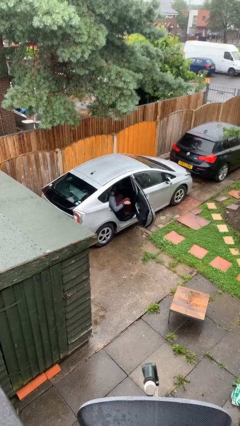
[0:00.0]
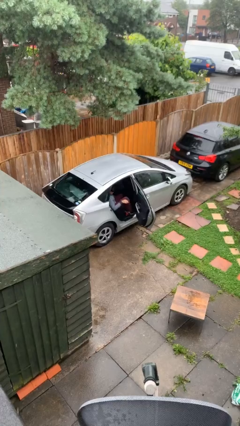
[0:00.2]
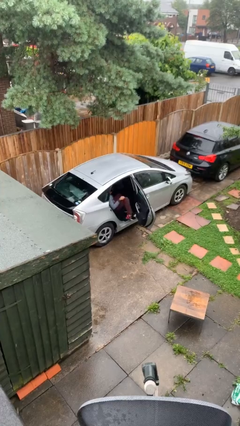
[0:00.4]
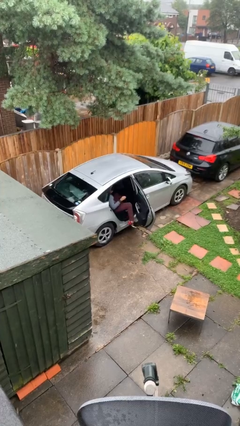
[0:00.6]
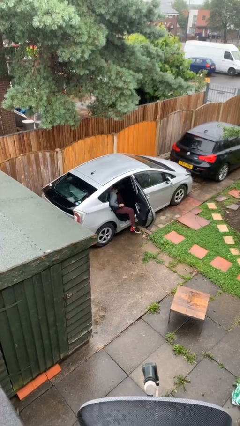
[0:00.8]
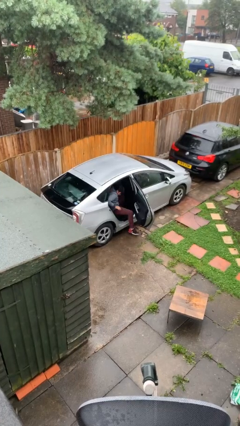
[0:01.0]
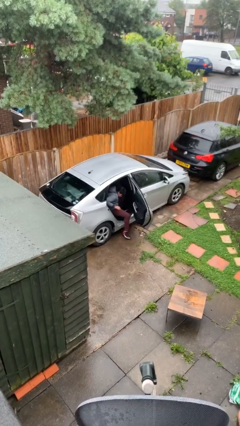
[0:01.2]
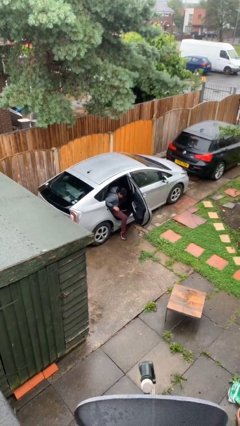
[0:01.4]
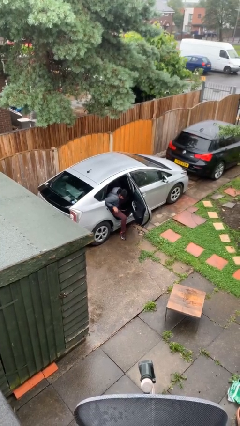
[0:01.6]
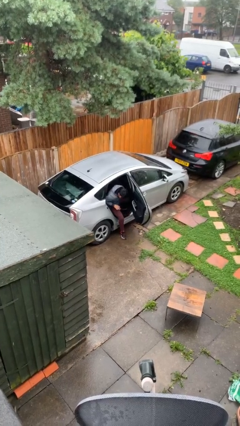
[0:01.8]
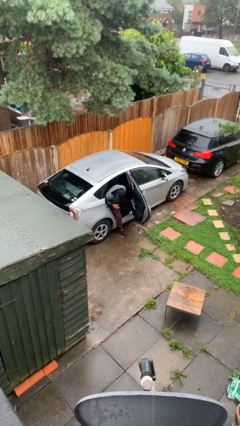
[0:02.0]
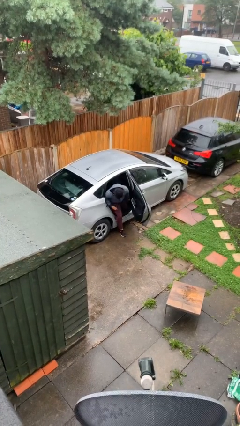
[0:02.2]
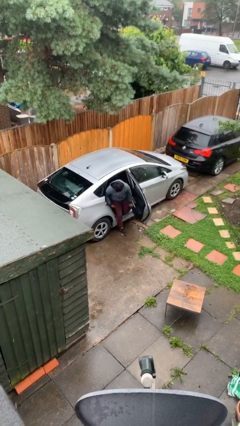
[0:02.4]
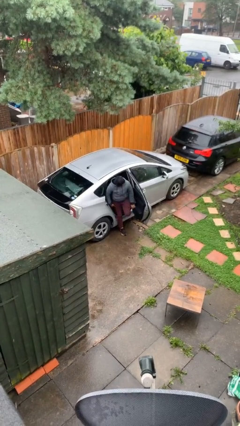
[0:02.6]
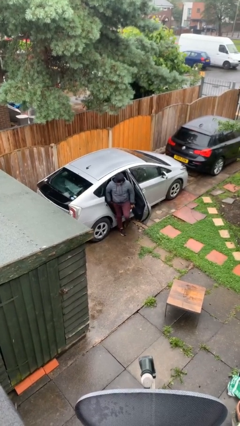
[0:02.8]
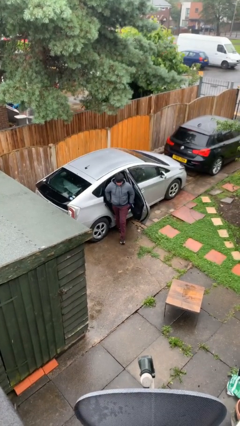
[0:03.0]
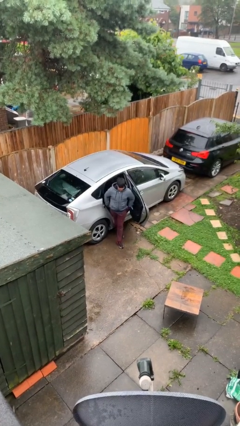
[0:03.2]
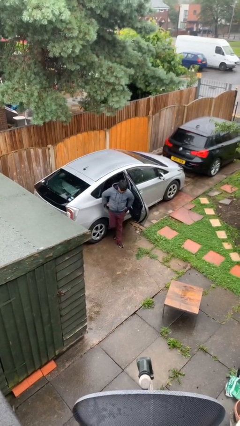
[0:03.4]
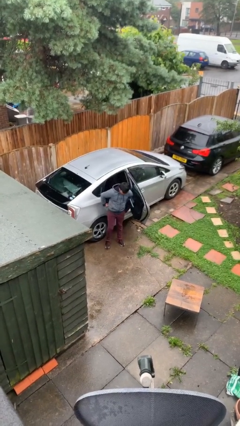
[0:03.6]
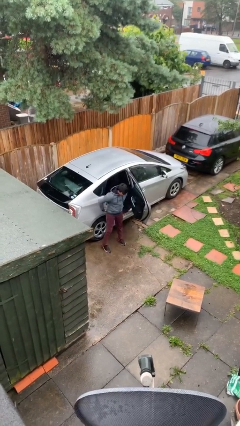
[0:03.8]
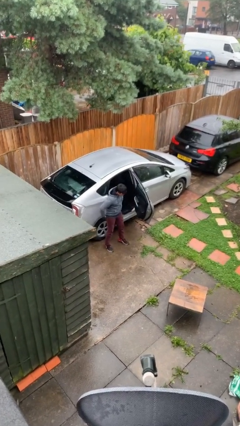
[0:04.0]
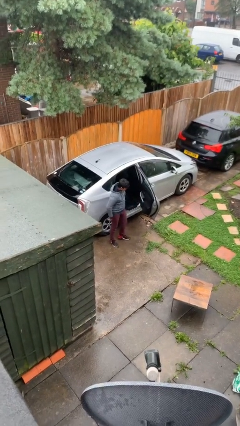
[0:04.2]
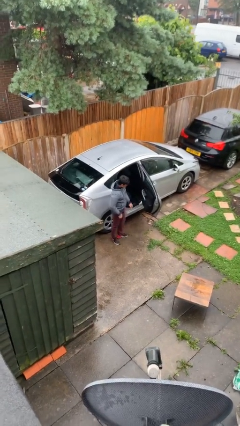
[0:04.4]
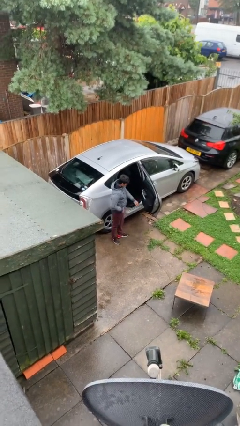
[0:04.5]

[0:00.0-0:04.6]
person exits car

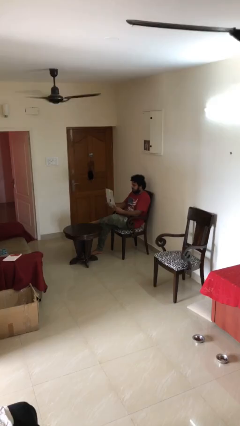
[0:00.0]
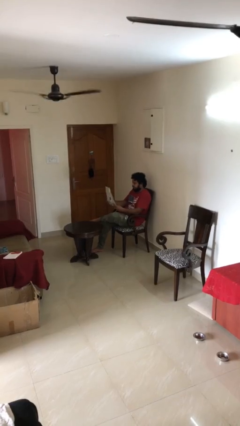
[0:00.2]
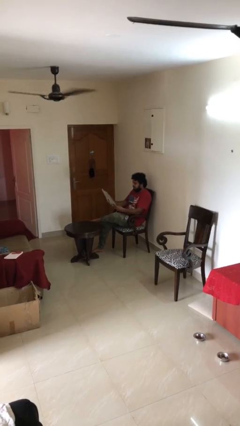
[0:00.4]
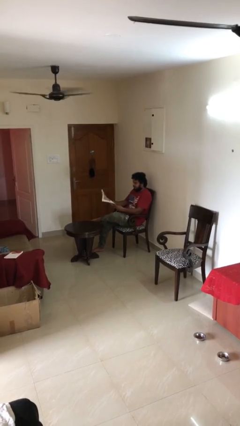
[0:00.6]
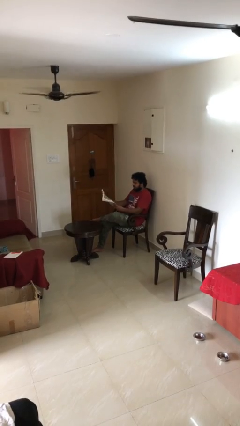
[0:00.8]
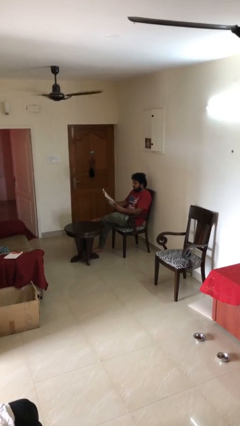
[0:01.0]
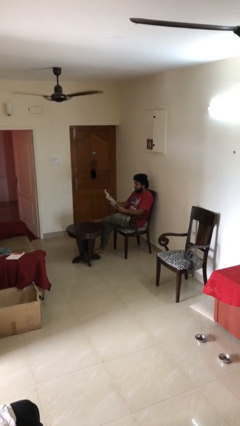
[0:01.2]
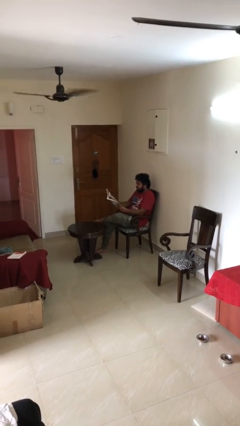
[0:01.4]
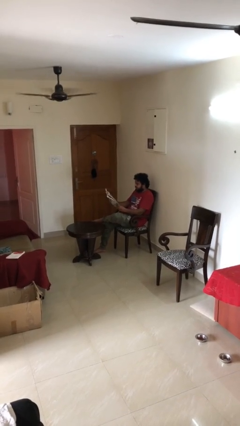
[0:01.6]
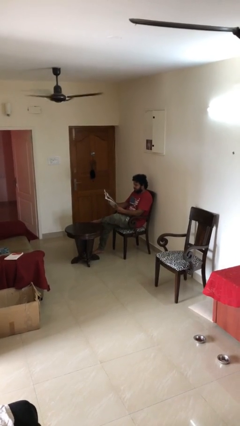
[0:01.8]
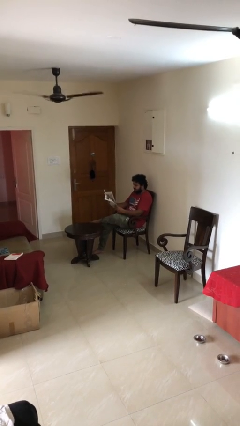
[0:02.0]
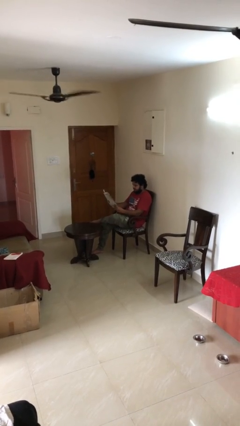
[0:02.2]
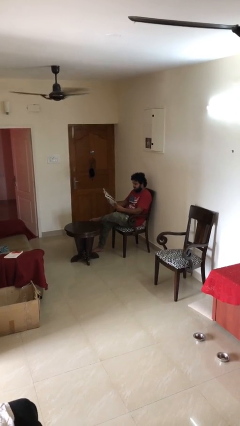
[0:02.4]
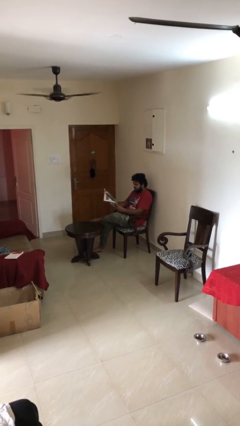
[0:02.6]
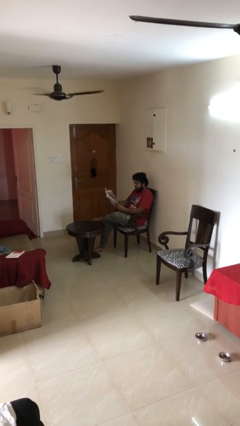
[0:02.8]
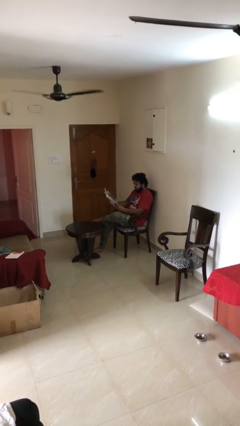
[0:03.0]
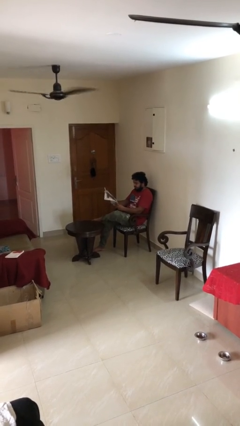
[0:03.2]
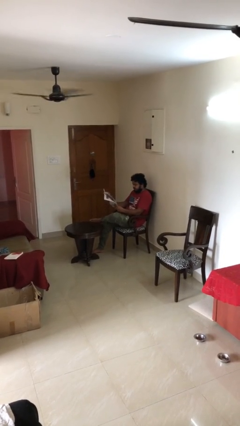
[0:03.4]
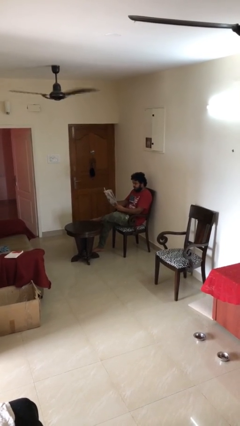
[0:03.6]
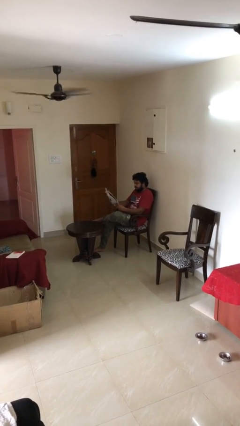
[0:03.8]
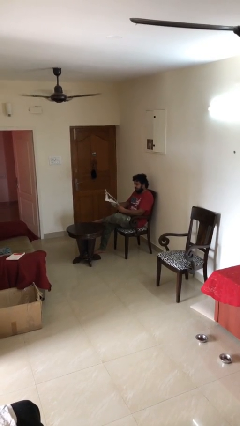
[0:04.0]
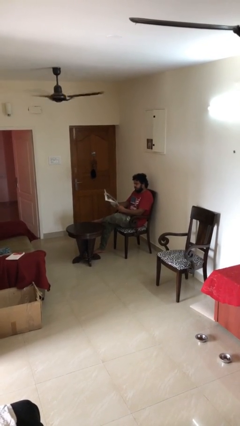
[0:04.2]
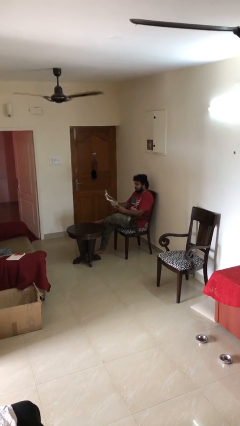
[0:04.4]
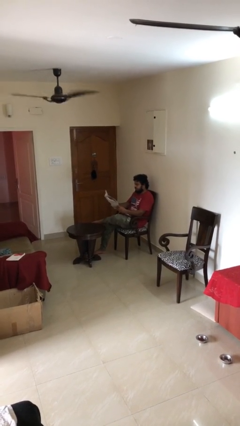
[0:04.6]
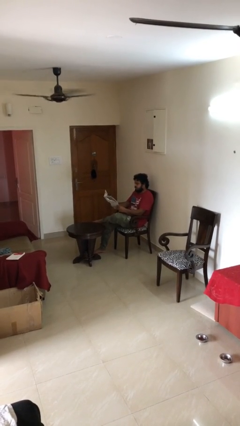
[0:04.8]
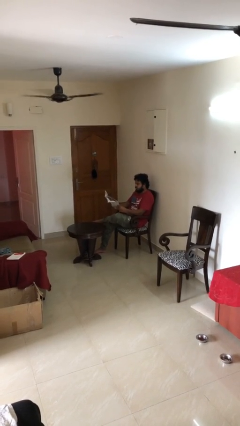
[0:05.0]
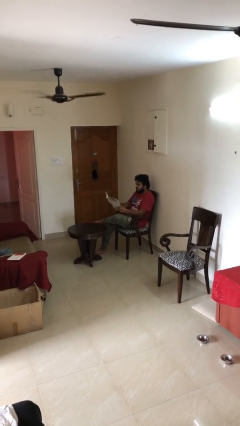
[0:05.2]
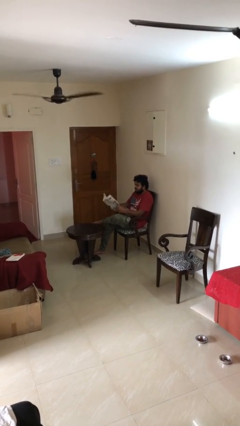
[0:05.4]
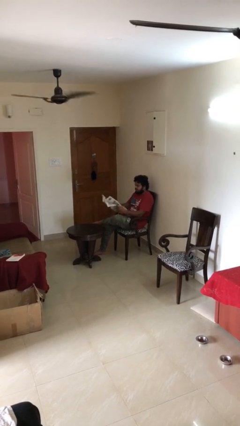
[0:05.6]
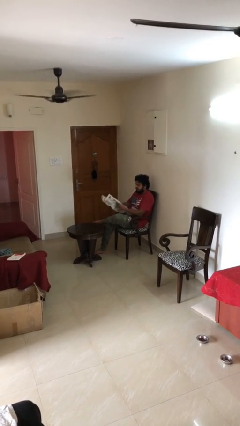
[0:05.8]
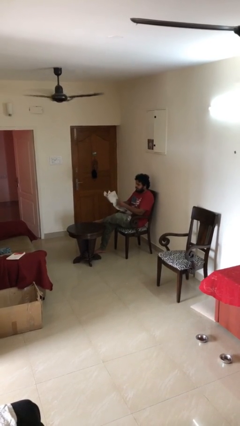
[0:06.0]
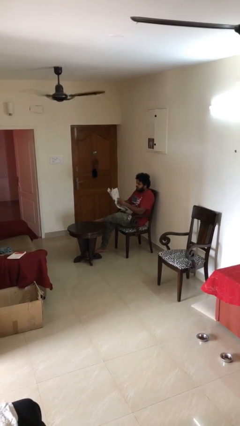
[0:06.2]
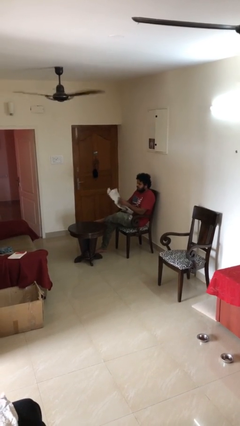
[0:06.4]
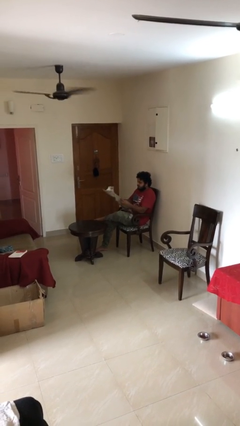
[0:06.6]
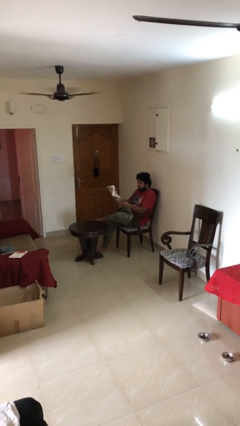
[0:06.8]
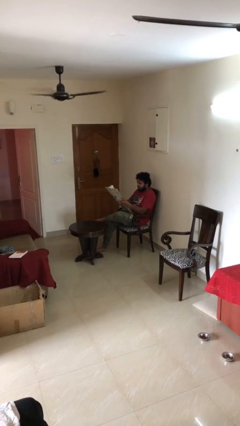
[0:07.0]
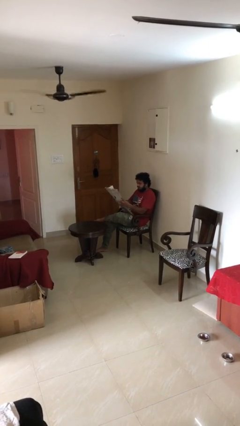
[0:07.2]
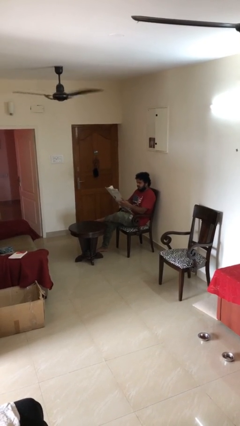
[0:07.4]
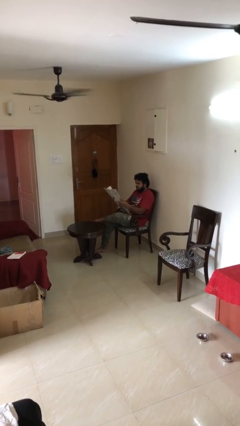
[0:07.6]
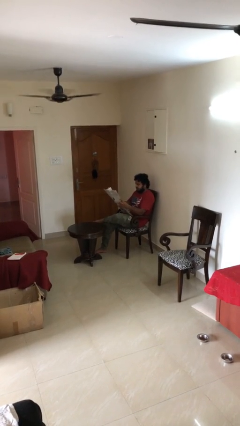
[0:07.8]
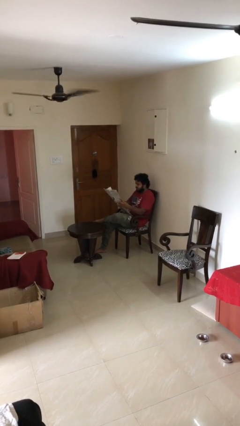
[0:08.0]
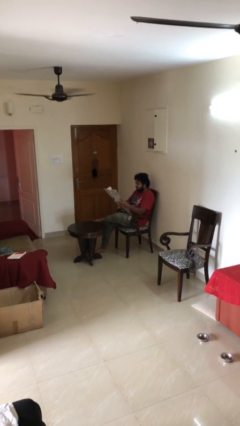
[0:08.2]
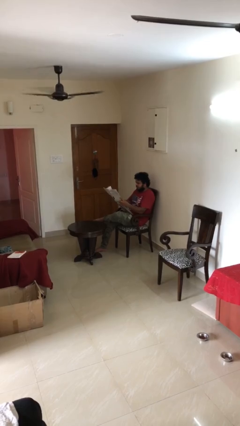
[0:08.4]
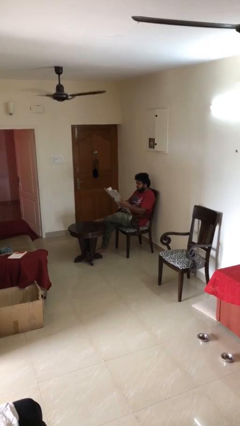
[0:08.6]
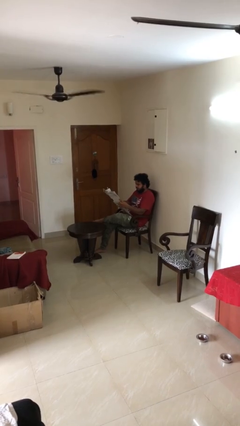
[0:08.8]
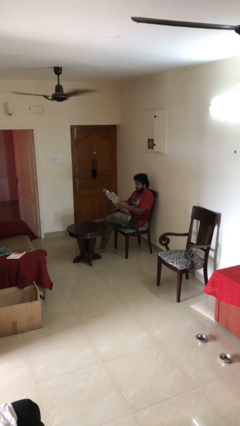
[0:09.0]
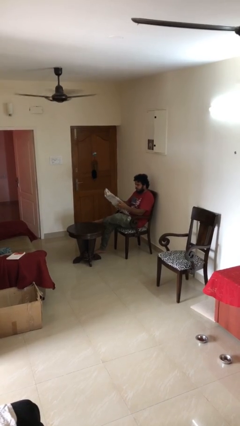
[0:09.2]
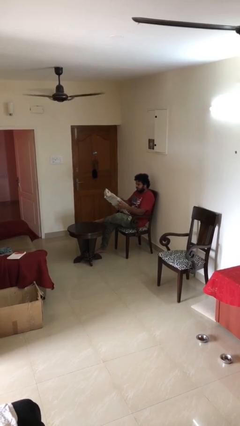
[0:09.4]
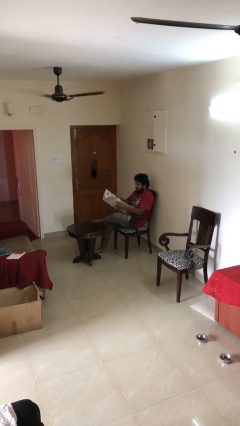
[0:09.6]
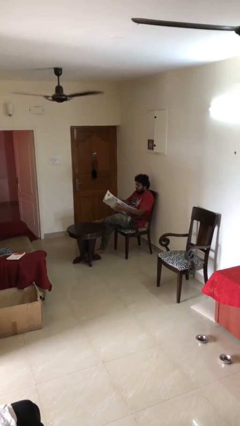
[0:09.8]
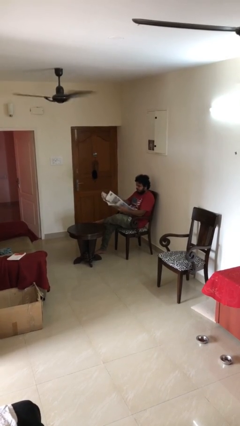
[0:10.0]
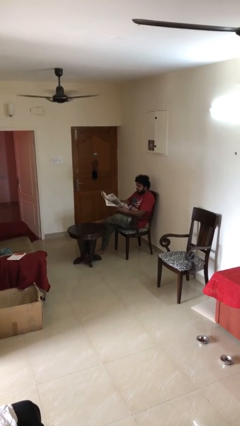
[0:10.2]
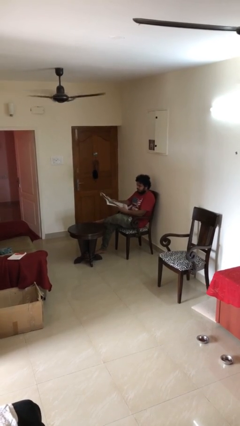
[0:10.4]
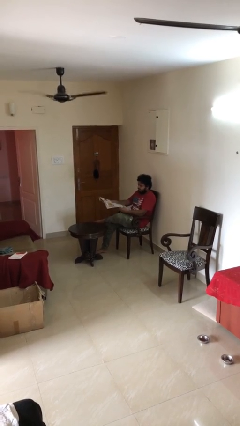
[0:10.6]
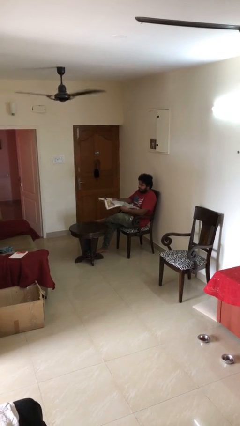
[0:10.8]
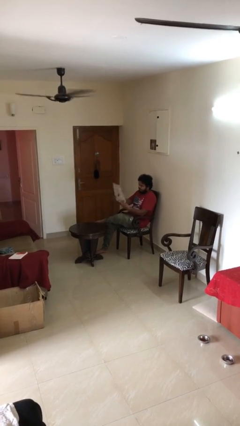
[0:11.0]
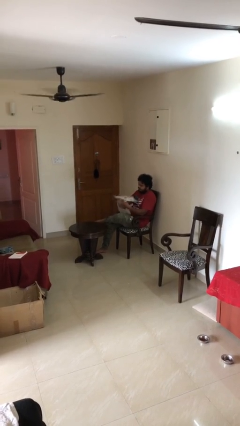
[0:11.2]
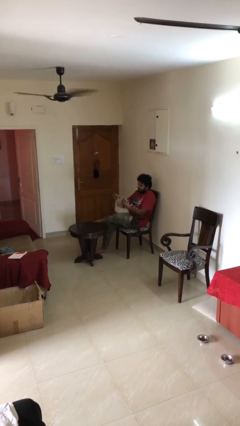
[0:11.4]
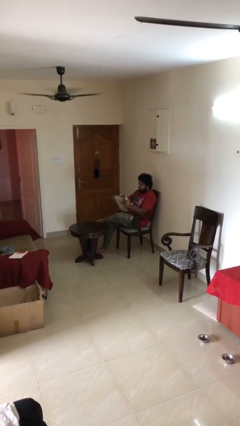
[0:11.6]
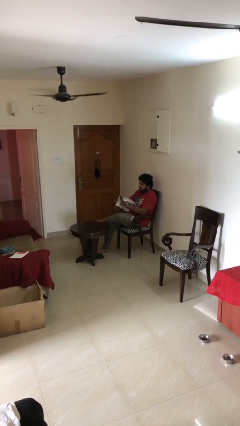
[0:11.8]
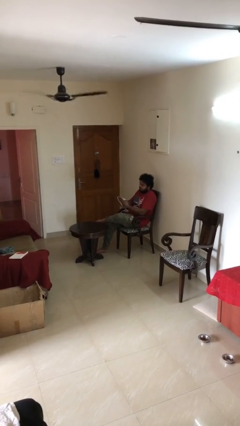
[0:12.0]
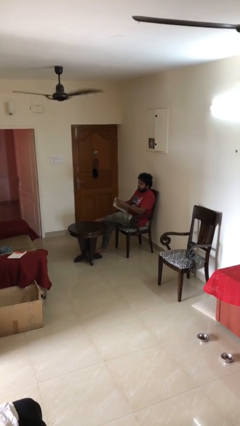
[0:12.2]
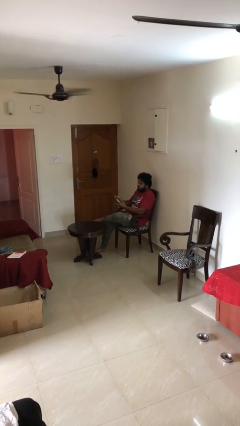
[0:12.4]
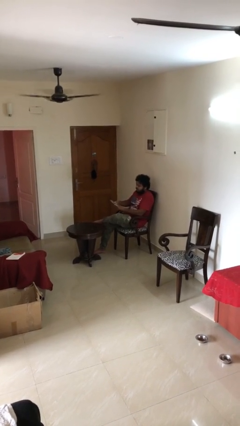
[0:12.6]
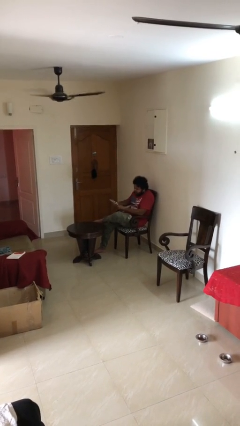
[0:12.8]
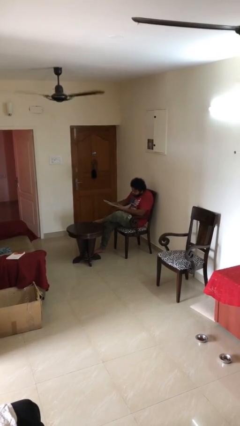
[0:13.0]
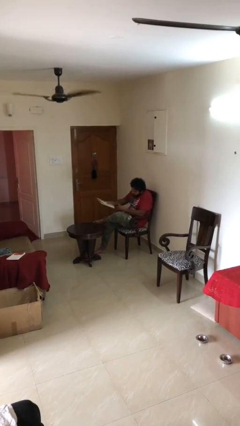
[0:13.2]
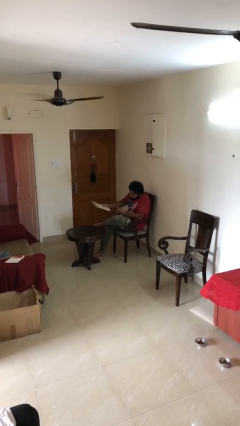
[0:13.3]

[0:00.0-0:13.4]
person reads document
